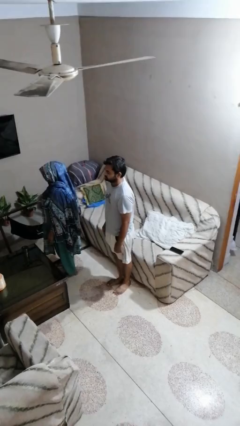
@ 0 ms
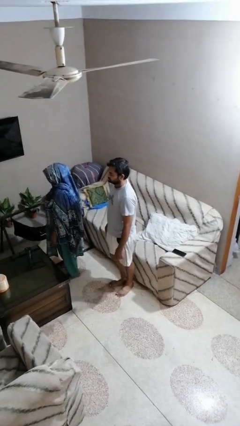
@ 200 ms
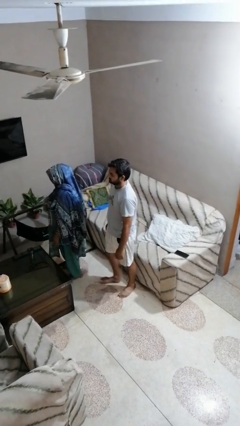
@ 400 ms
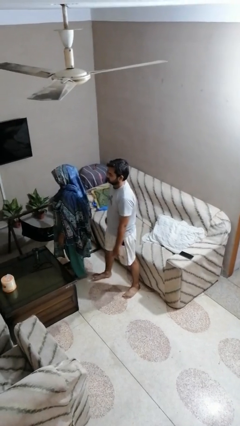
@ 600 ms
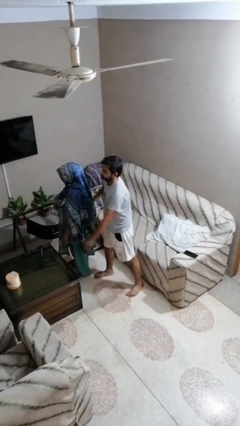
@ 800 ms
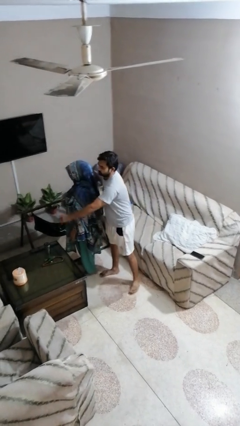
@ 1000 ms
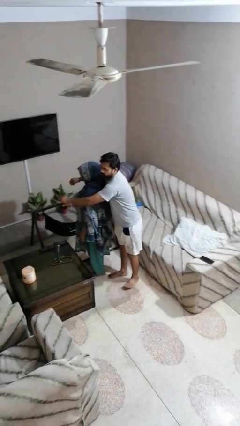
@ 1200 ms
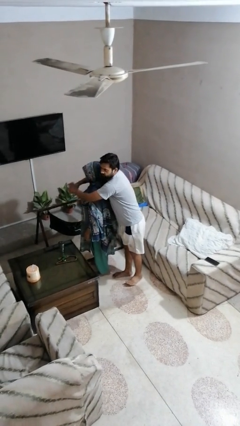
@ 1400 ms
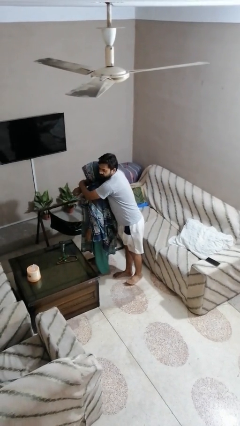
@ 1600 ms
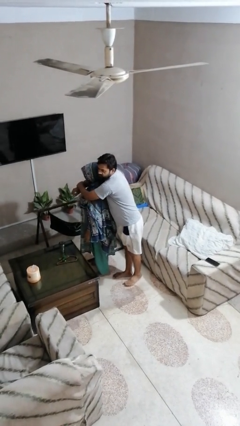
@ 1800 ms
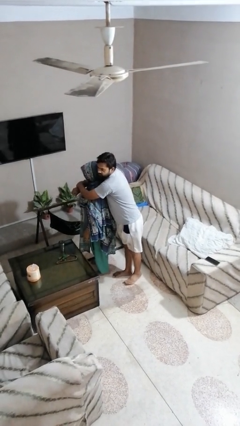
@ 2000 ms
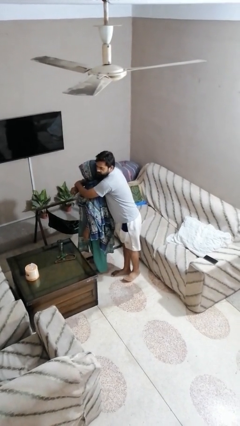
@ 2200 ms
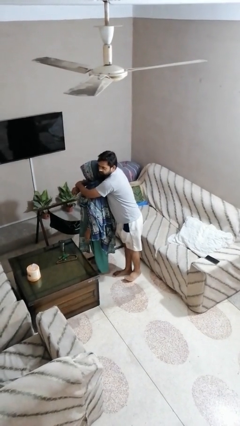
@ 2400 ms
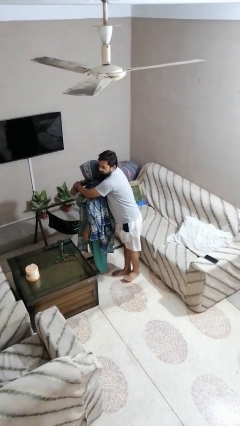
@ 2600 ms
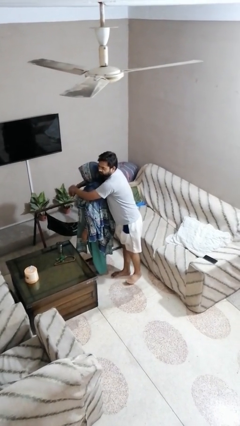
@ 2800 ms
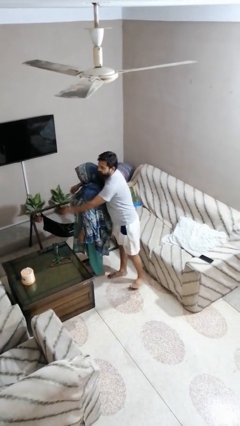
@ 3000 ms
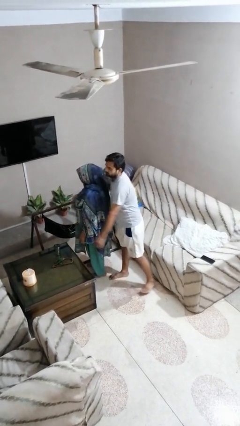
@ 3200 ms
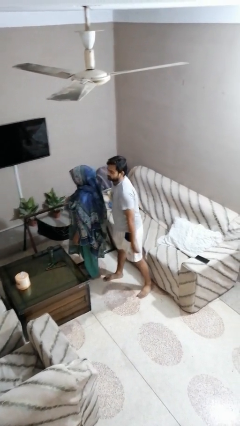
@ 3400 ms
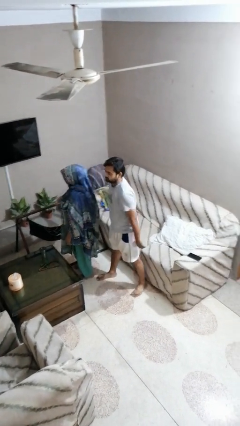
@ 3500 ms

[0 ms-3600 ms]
person hugs person from behind

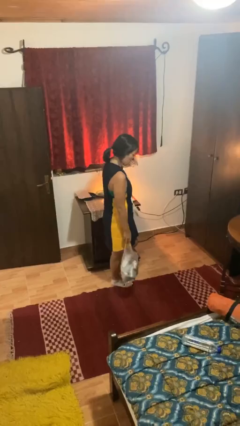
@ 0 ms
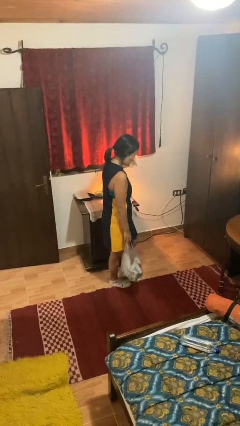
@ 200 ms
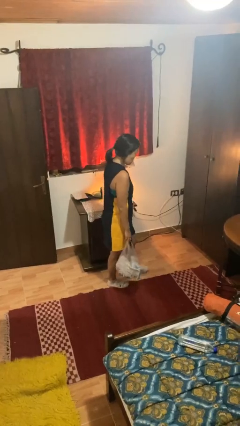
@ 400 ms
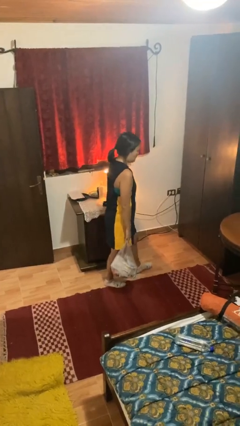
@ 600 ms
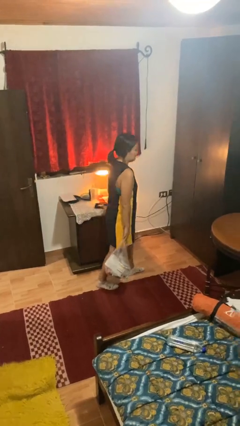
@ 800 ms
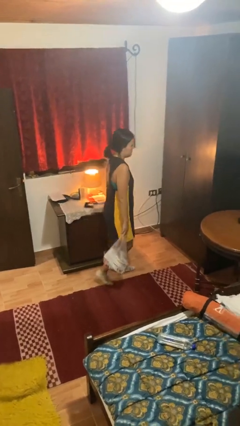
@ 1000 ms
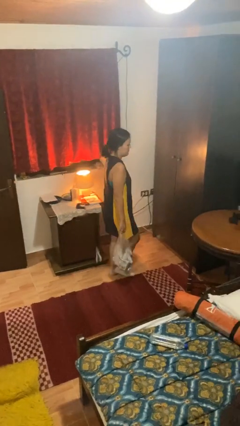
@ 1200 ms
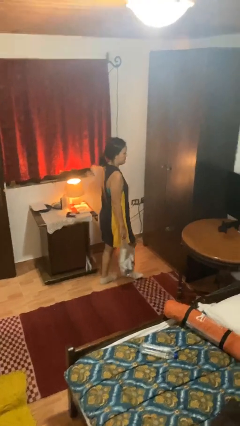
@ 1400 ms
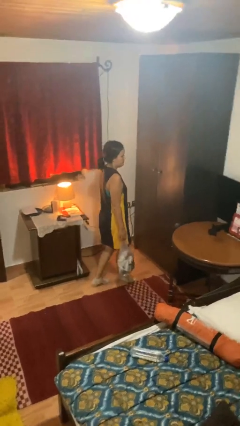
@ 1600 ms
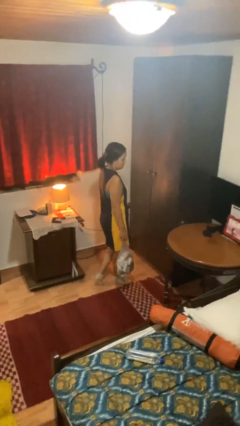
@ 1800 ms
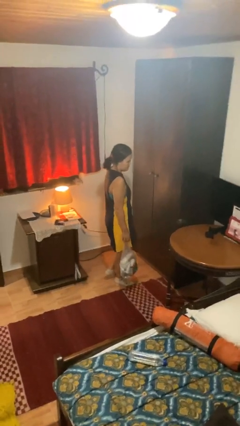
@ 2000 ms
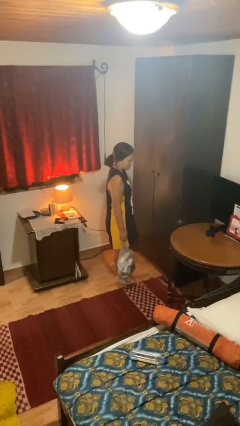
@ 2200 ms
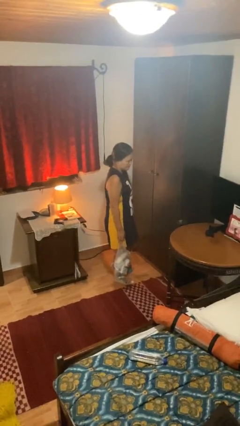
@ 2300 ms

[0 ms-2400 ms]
person carries groceries

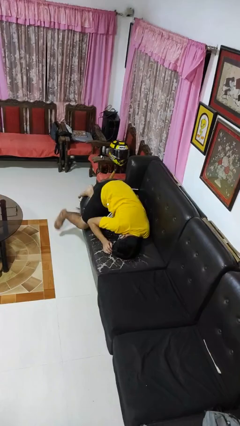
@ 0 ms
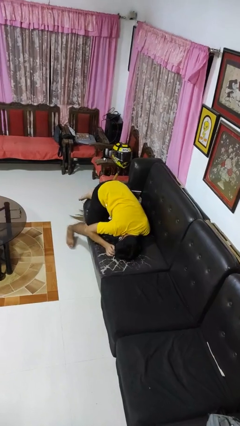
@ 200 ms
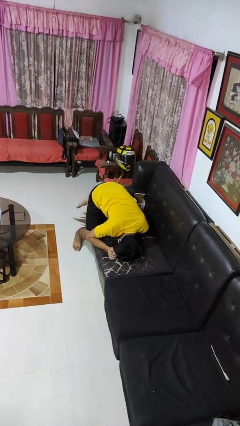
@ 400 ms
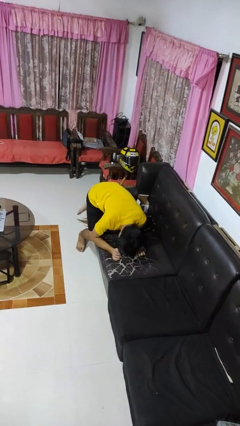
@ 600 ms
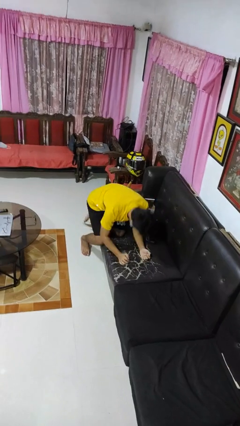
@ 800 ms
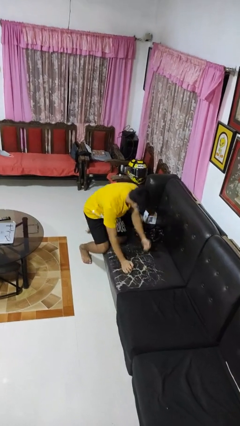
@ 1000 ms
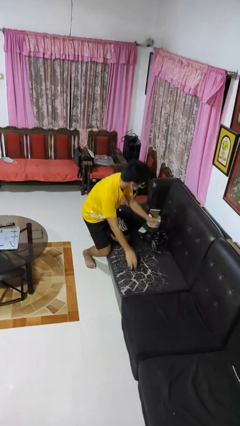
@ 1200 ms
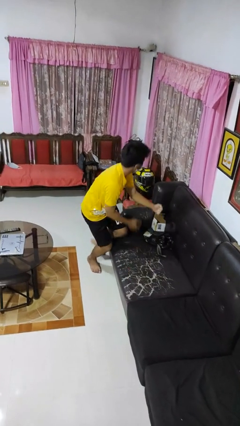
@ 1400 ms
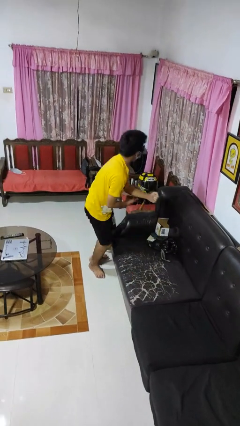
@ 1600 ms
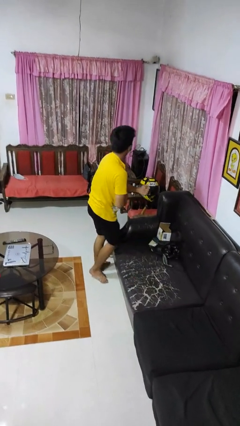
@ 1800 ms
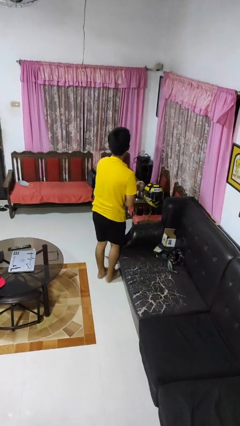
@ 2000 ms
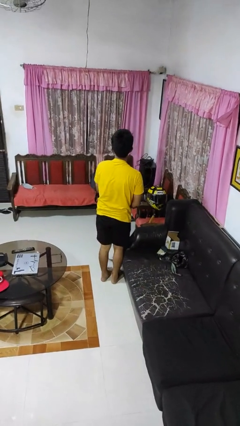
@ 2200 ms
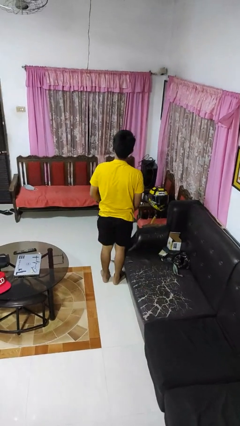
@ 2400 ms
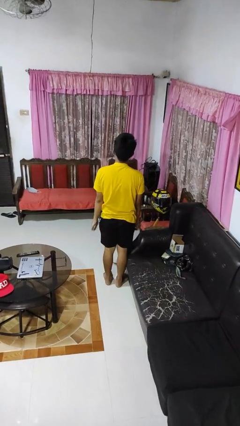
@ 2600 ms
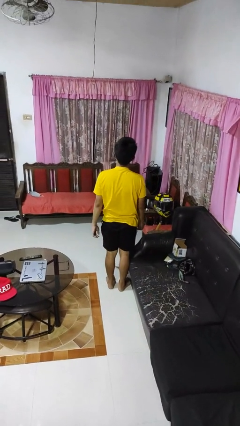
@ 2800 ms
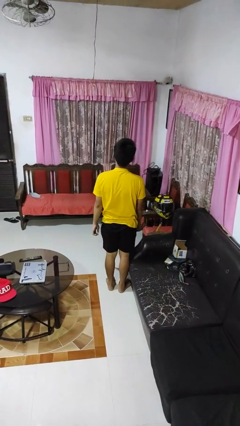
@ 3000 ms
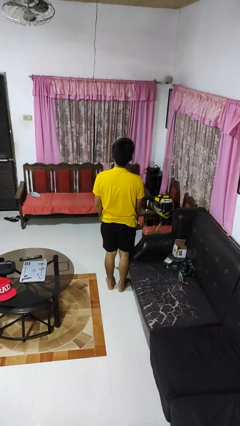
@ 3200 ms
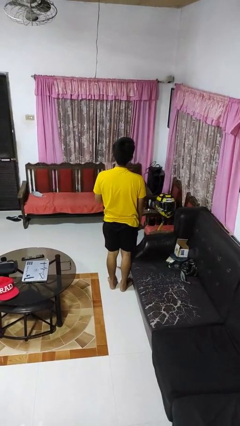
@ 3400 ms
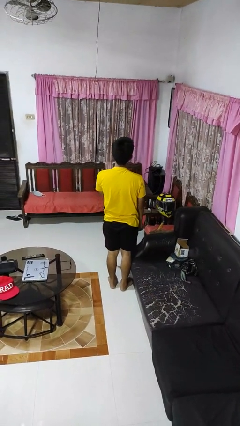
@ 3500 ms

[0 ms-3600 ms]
person stands up

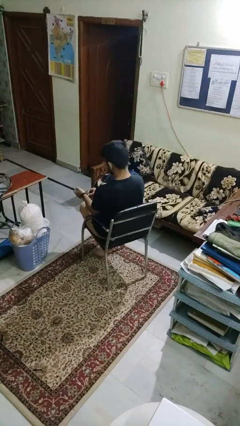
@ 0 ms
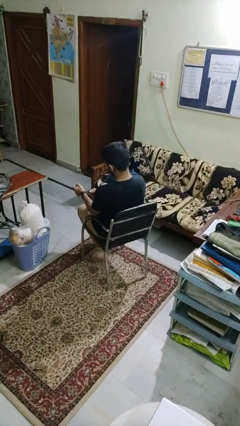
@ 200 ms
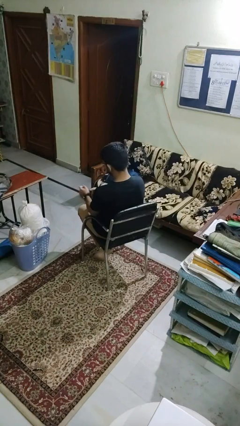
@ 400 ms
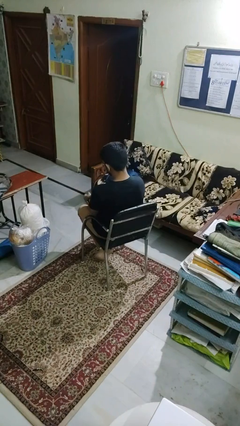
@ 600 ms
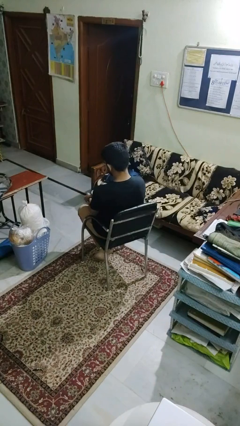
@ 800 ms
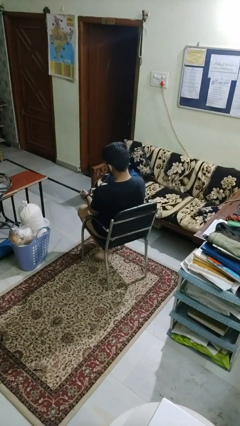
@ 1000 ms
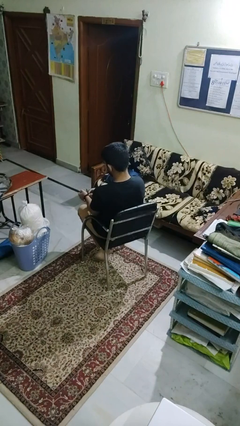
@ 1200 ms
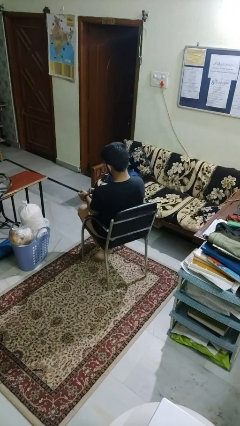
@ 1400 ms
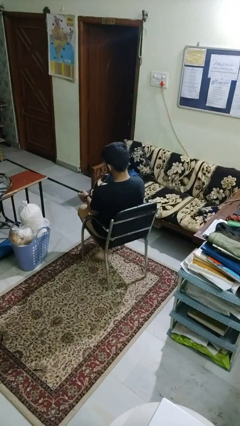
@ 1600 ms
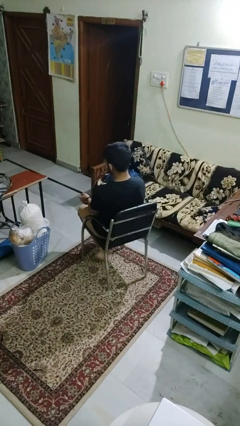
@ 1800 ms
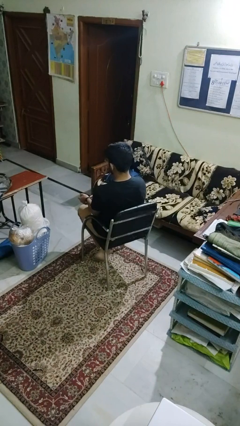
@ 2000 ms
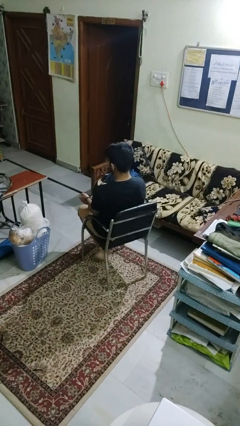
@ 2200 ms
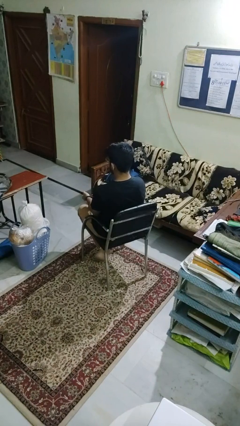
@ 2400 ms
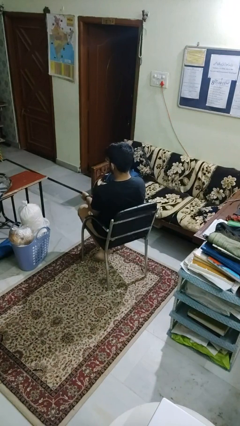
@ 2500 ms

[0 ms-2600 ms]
person takes off wristwatch

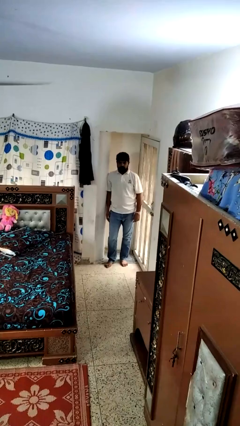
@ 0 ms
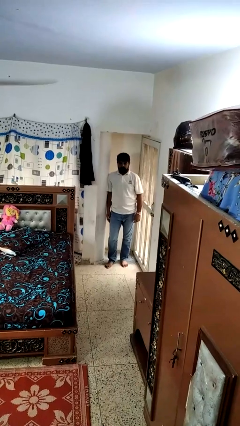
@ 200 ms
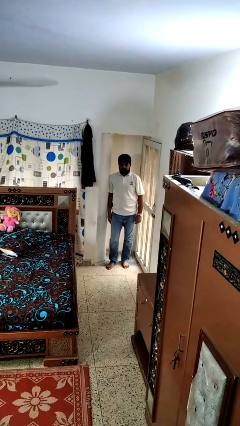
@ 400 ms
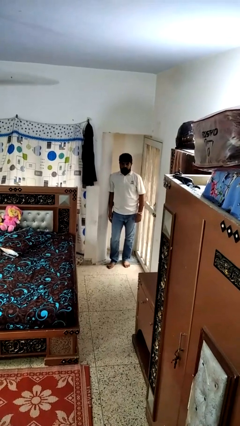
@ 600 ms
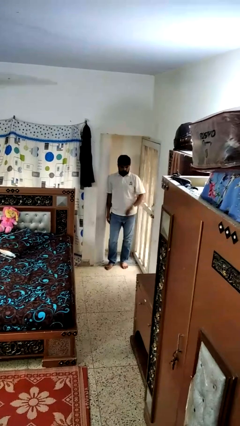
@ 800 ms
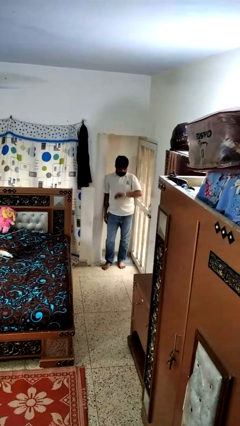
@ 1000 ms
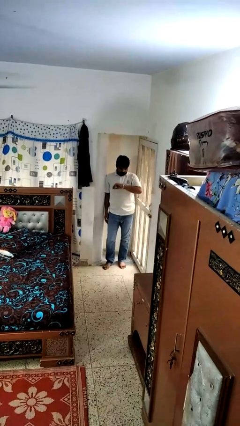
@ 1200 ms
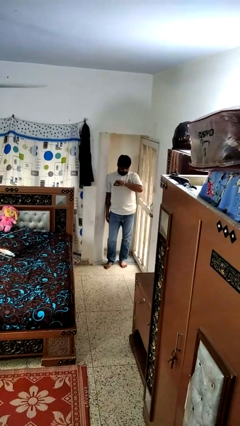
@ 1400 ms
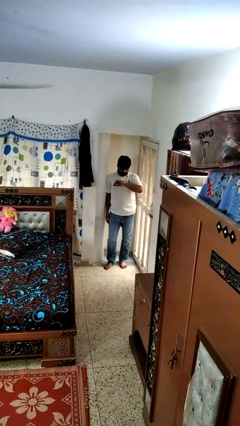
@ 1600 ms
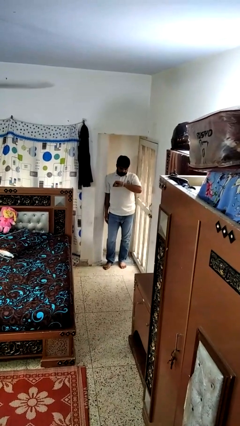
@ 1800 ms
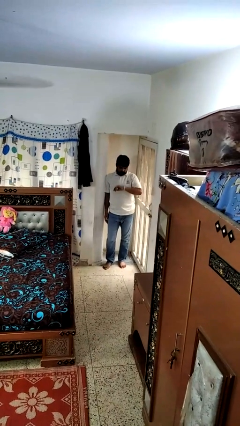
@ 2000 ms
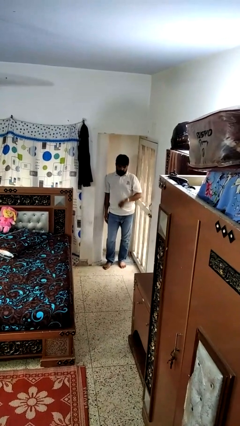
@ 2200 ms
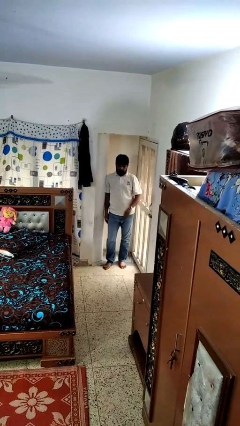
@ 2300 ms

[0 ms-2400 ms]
person looks at wristwatch

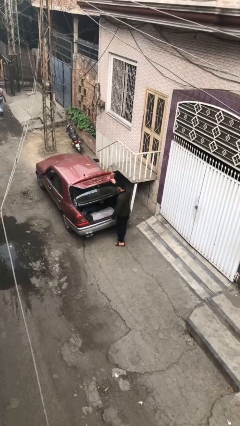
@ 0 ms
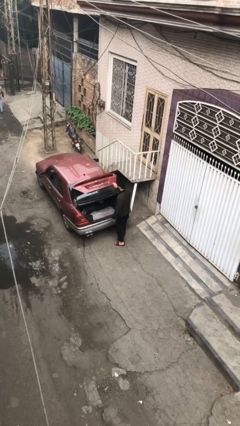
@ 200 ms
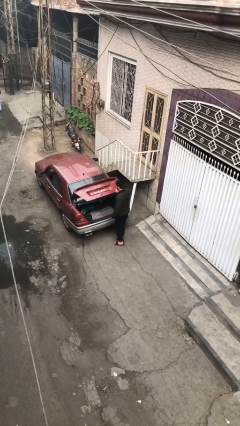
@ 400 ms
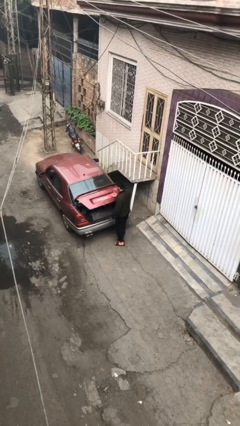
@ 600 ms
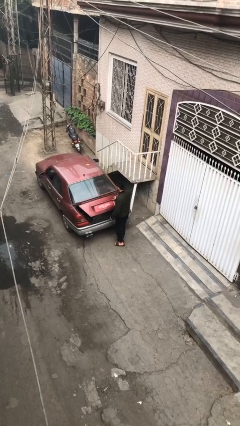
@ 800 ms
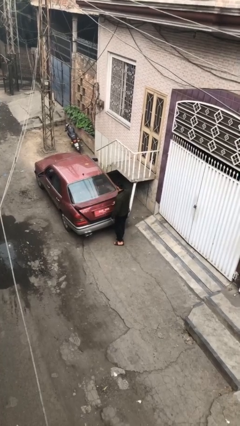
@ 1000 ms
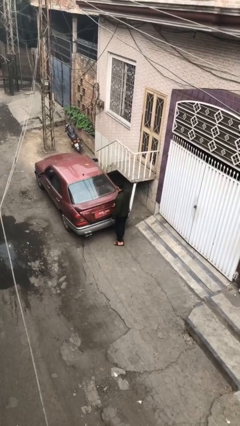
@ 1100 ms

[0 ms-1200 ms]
person closes car trunk

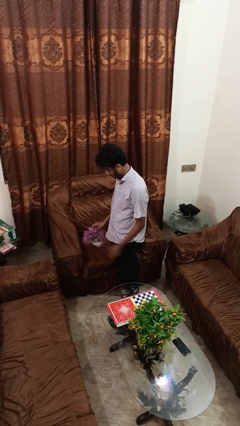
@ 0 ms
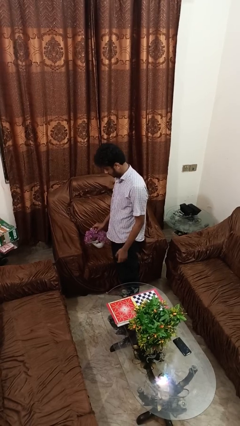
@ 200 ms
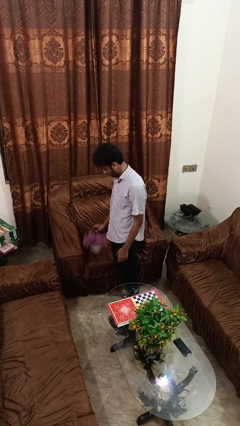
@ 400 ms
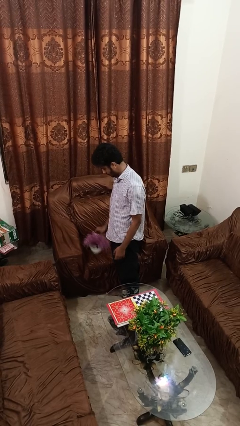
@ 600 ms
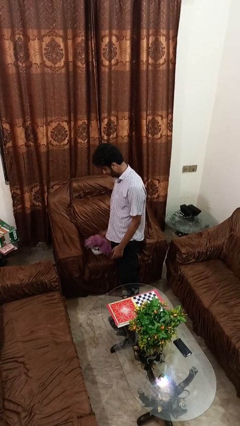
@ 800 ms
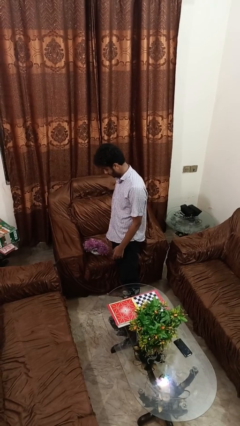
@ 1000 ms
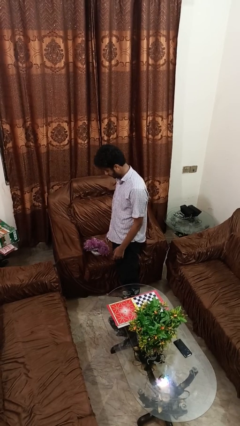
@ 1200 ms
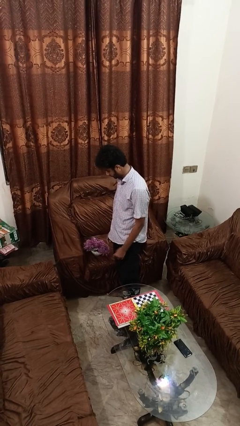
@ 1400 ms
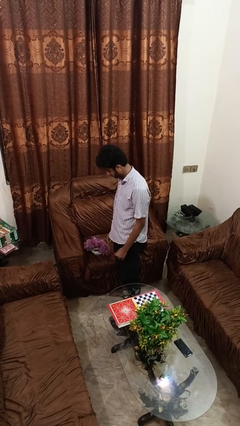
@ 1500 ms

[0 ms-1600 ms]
person puts down object on couch
